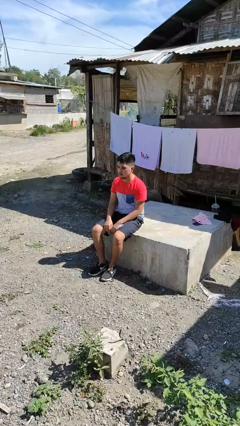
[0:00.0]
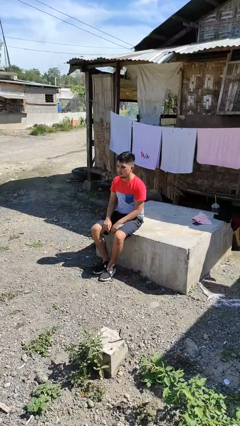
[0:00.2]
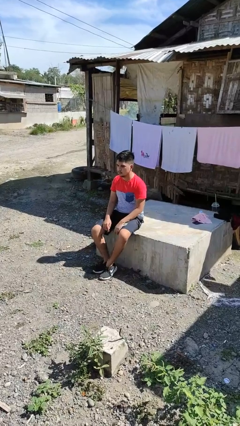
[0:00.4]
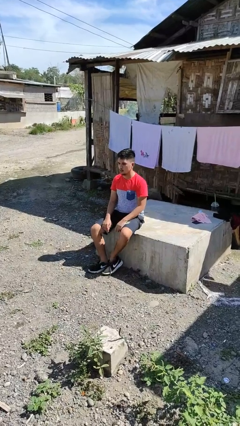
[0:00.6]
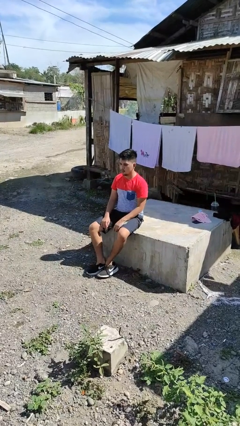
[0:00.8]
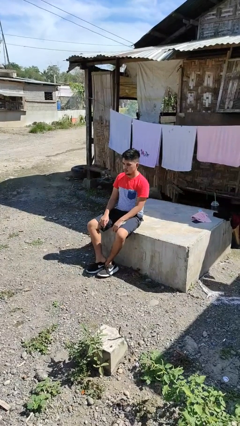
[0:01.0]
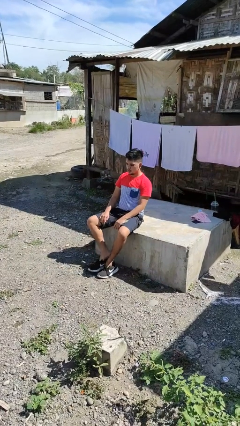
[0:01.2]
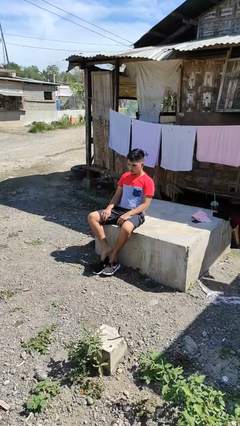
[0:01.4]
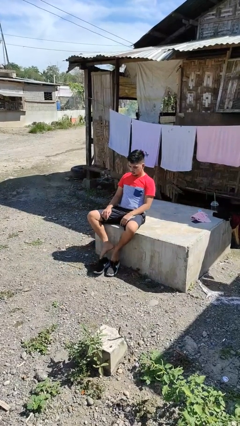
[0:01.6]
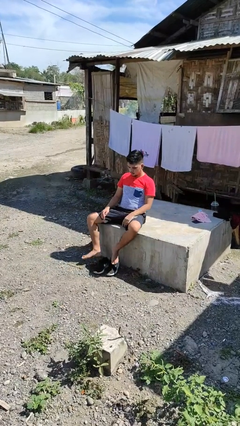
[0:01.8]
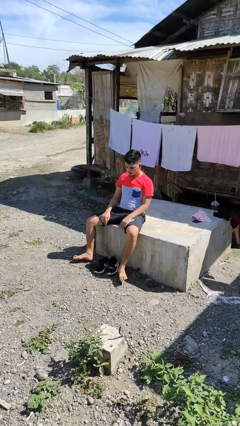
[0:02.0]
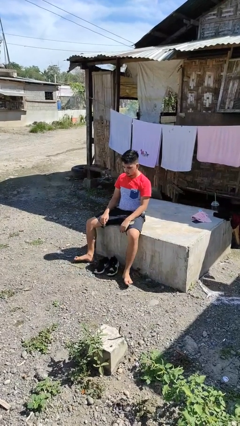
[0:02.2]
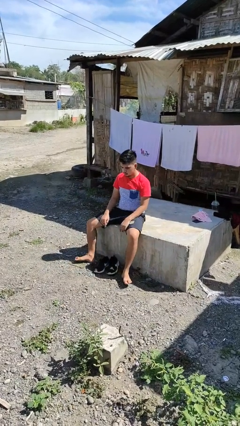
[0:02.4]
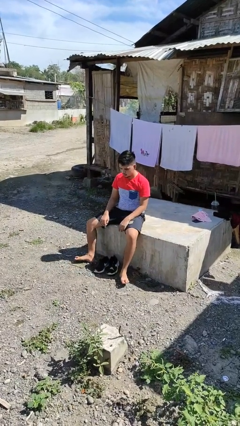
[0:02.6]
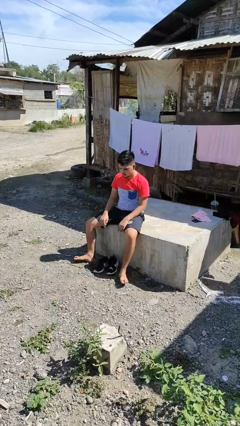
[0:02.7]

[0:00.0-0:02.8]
person takes off shoes

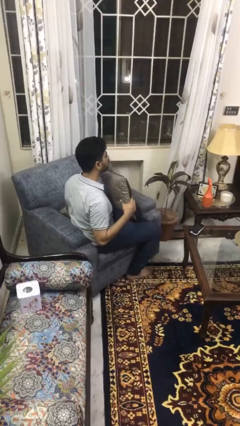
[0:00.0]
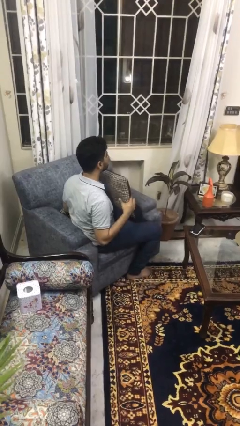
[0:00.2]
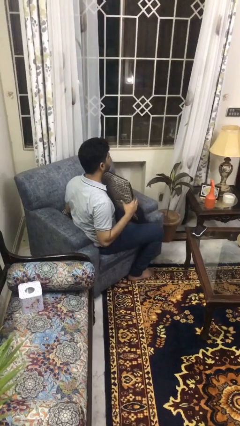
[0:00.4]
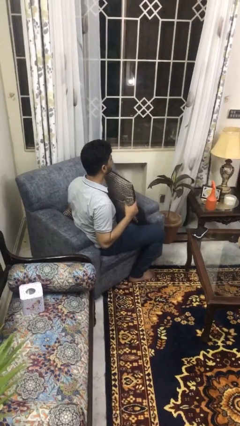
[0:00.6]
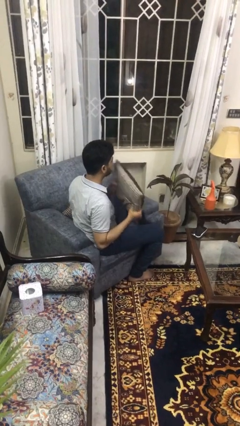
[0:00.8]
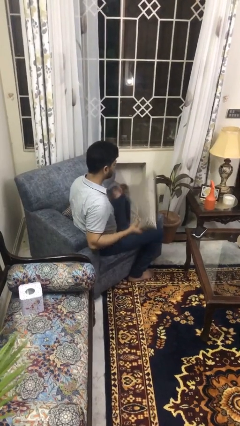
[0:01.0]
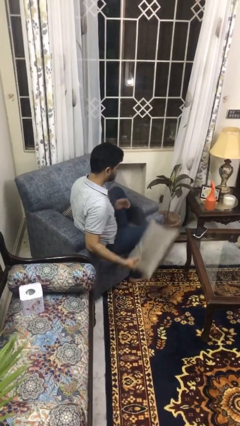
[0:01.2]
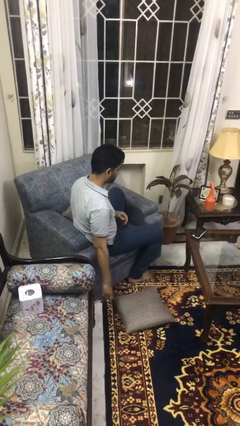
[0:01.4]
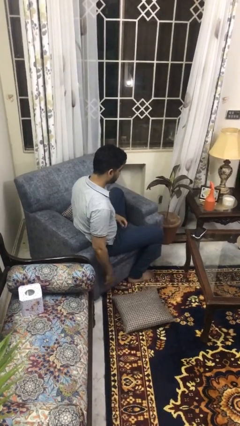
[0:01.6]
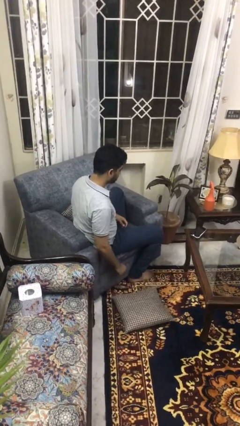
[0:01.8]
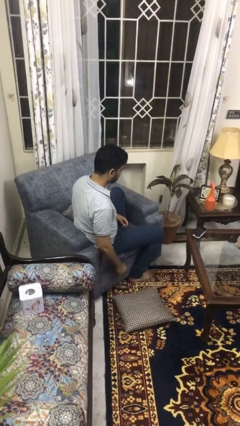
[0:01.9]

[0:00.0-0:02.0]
person throws object to ground

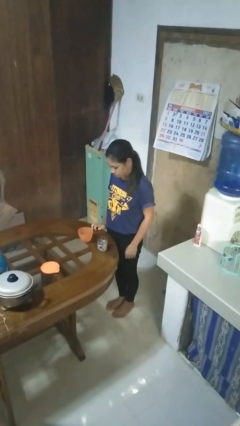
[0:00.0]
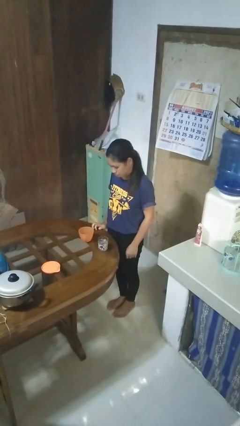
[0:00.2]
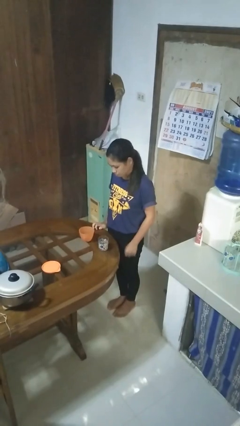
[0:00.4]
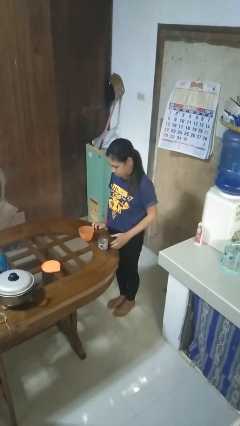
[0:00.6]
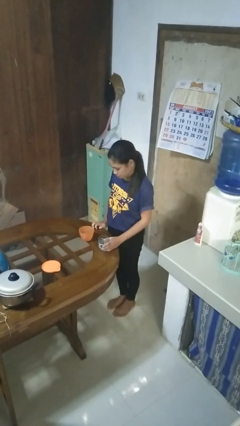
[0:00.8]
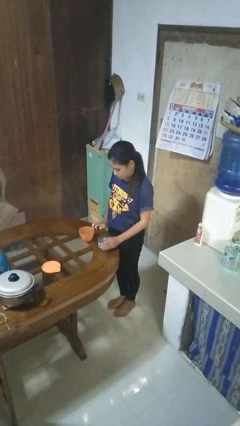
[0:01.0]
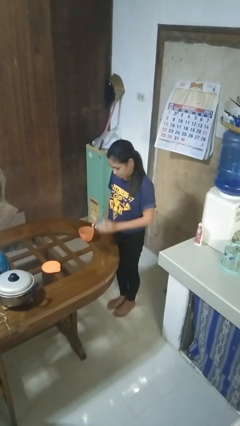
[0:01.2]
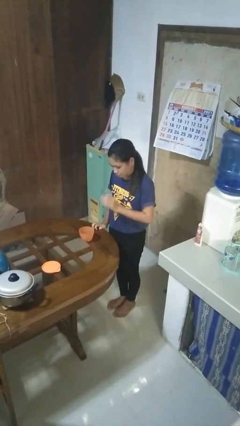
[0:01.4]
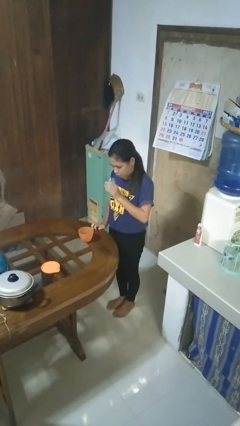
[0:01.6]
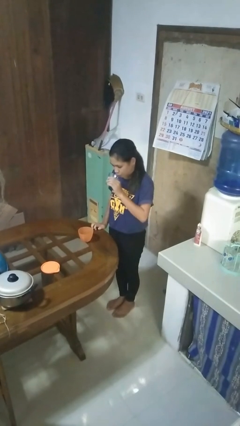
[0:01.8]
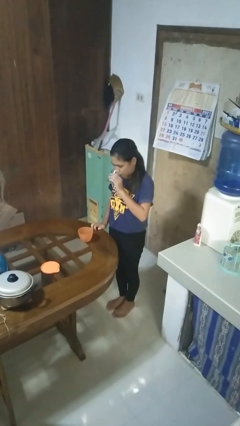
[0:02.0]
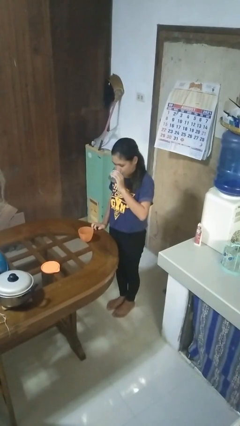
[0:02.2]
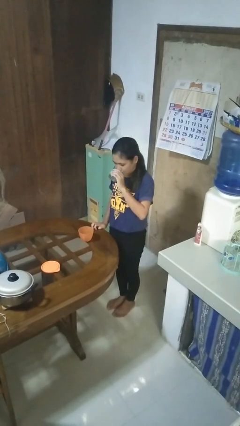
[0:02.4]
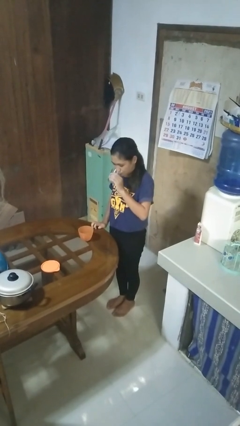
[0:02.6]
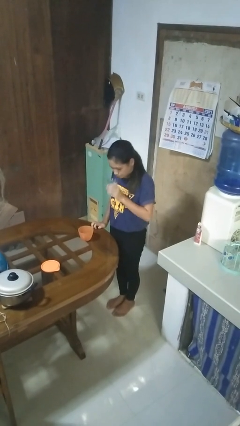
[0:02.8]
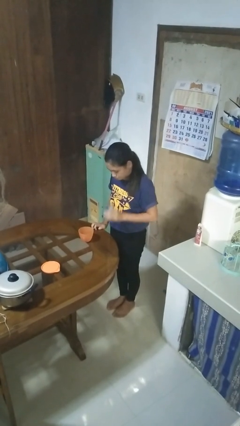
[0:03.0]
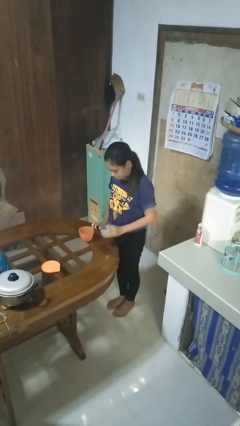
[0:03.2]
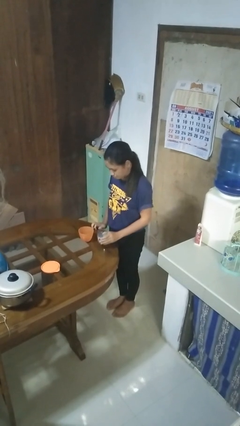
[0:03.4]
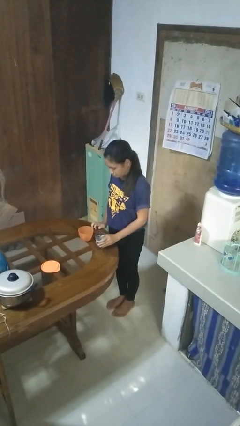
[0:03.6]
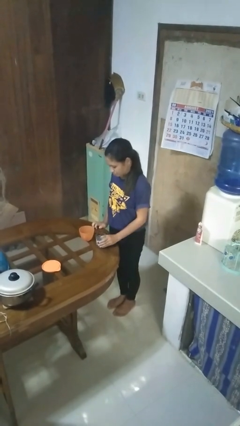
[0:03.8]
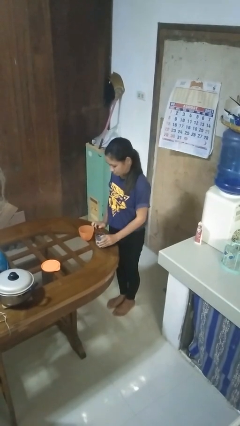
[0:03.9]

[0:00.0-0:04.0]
person drinks from cup

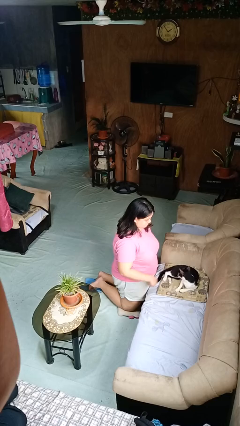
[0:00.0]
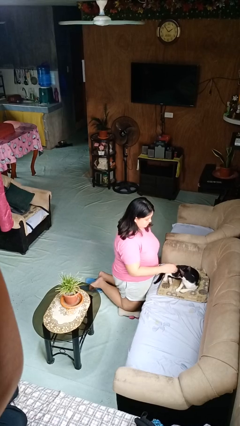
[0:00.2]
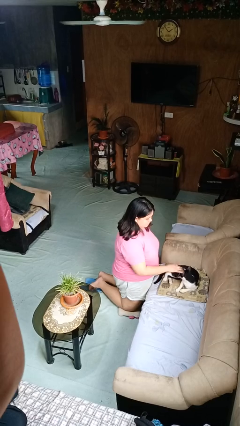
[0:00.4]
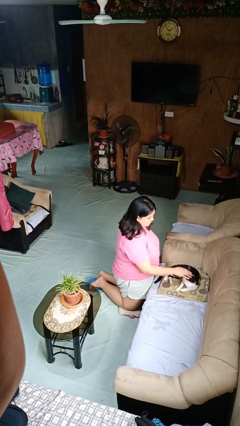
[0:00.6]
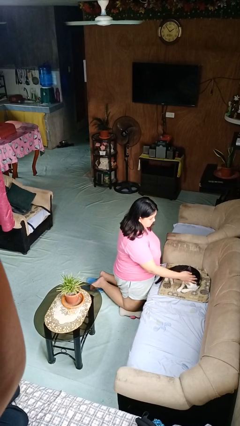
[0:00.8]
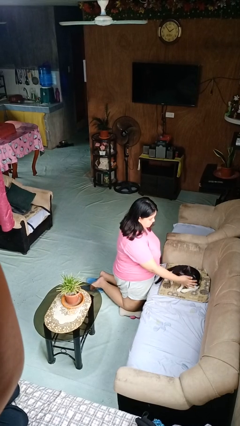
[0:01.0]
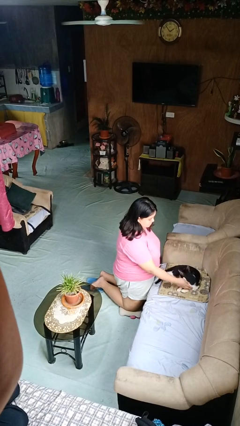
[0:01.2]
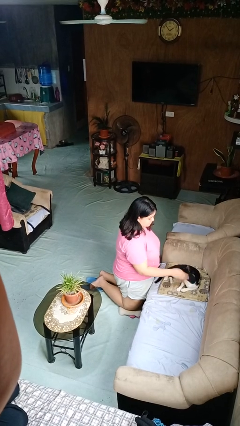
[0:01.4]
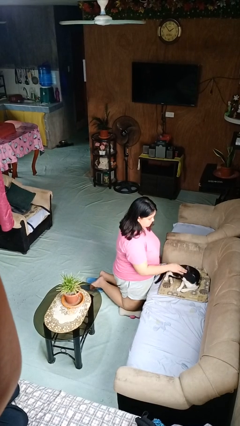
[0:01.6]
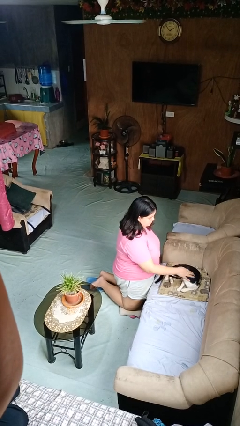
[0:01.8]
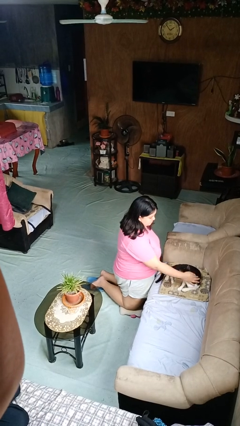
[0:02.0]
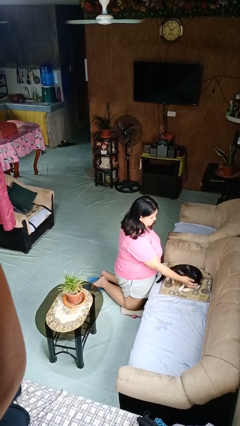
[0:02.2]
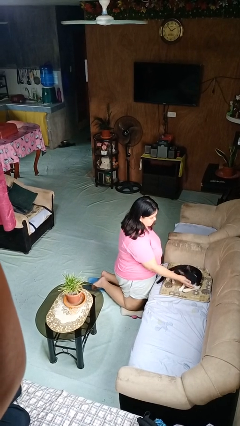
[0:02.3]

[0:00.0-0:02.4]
person pets cat

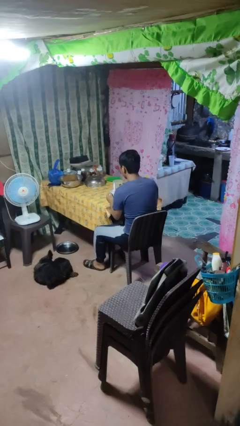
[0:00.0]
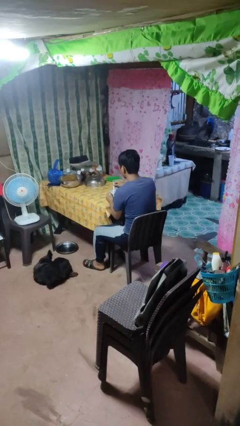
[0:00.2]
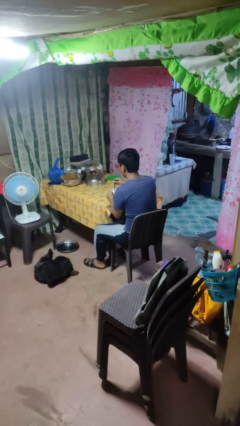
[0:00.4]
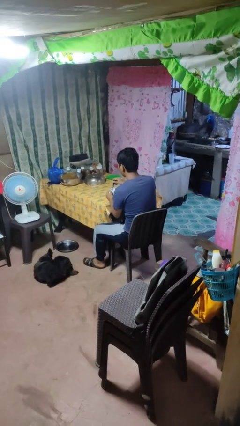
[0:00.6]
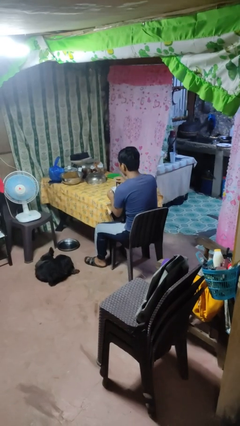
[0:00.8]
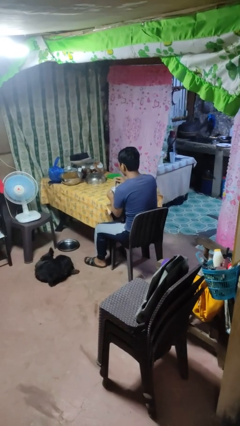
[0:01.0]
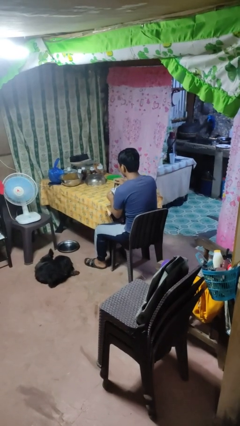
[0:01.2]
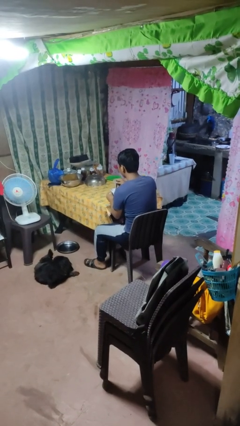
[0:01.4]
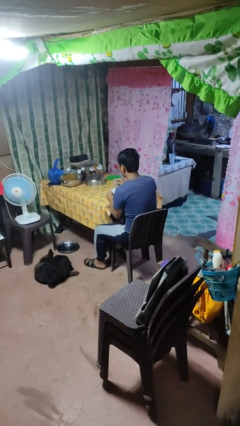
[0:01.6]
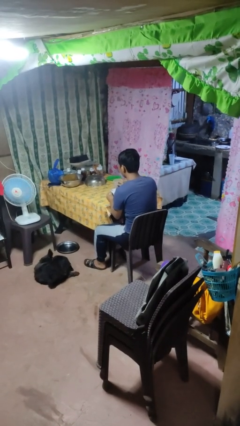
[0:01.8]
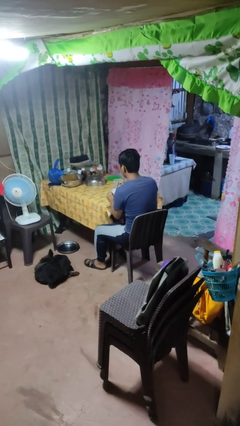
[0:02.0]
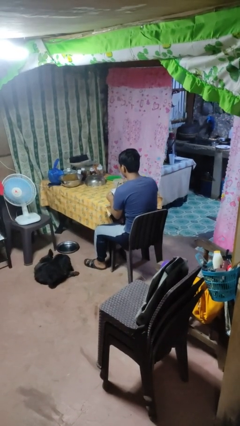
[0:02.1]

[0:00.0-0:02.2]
person stirs mug

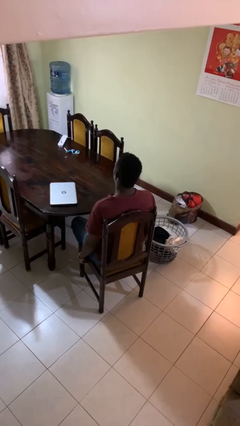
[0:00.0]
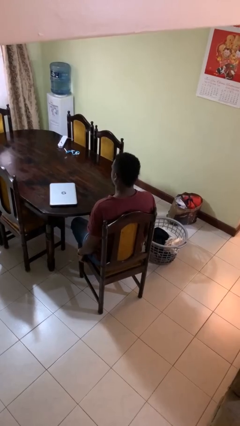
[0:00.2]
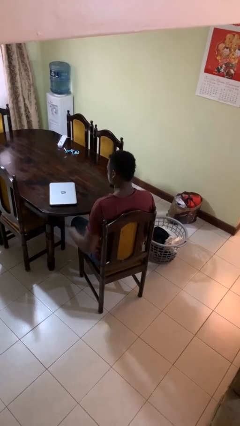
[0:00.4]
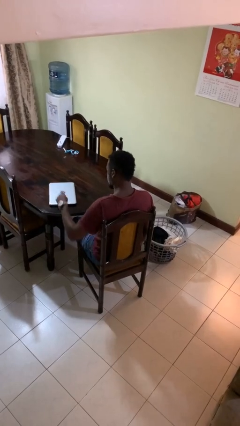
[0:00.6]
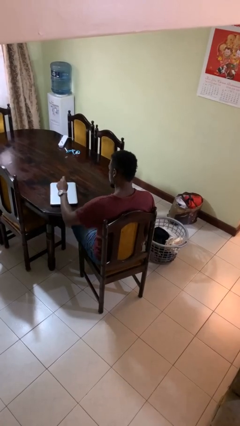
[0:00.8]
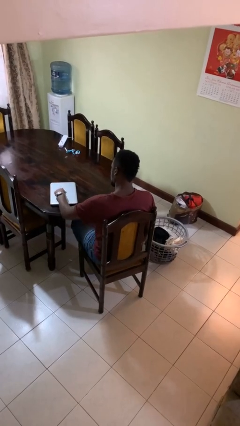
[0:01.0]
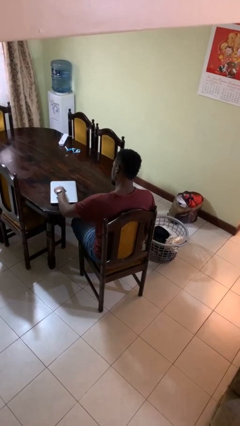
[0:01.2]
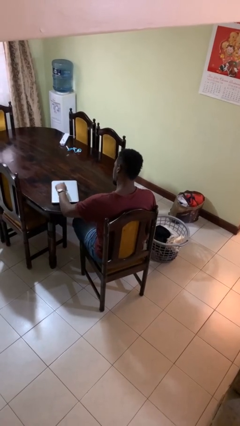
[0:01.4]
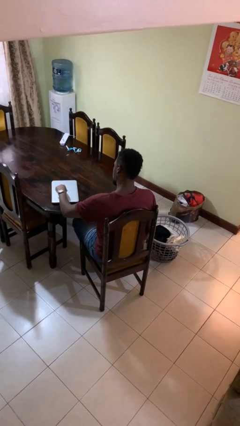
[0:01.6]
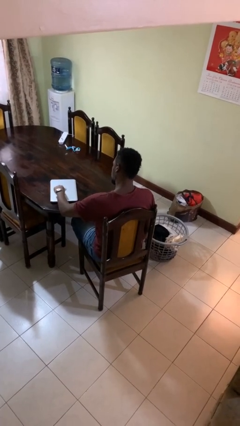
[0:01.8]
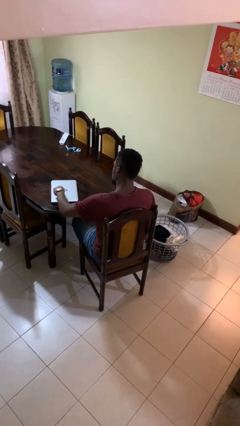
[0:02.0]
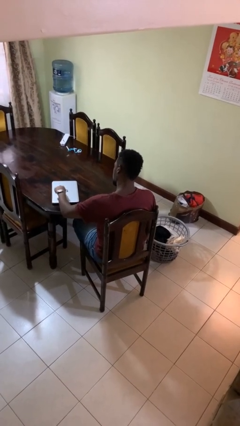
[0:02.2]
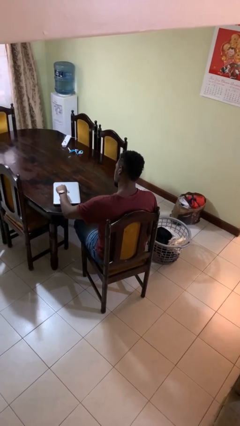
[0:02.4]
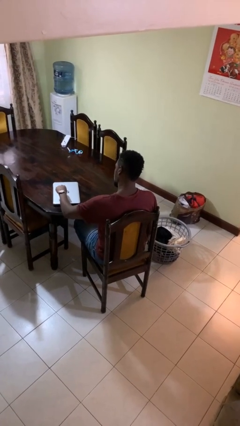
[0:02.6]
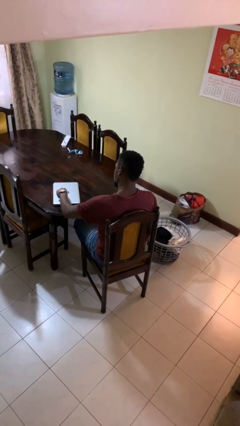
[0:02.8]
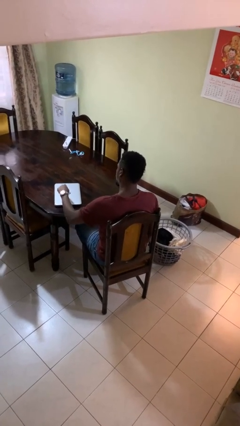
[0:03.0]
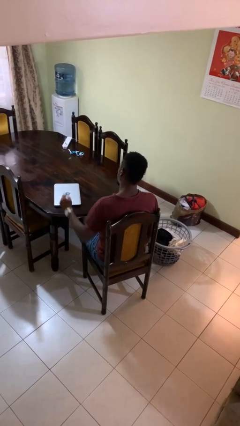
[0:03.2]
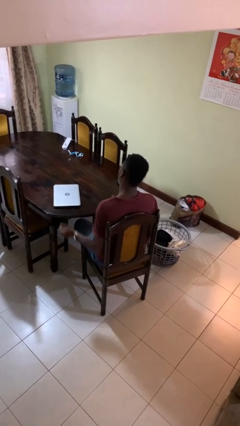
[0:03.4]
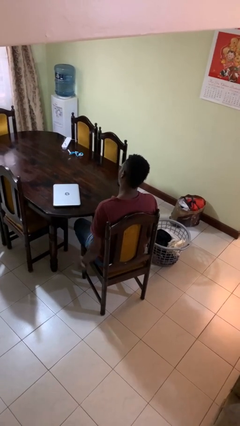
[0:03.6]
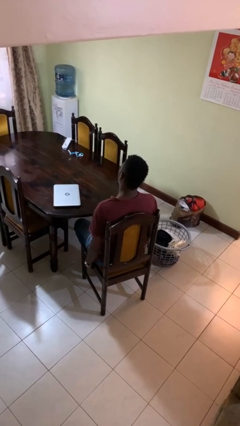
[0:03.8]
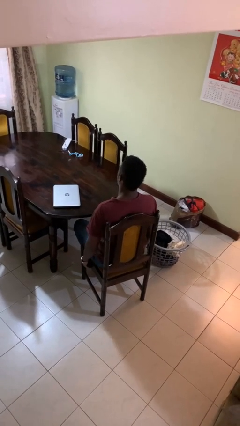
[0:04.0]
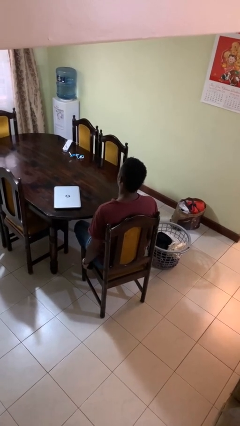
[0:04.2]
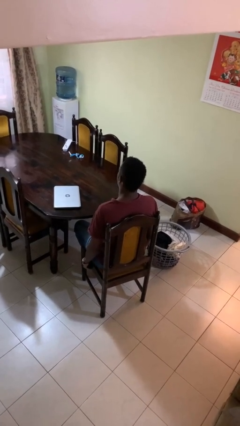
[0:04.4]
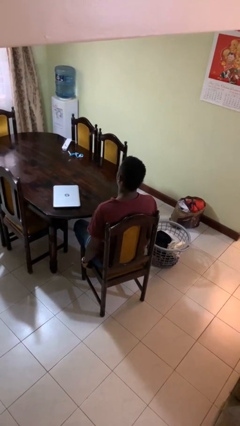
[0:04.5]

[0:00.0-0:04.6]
person taps object with finger
